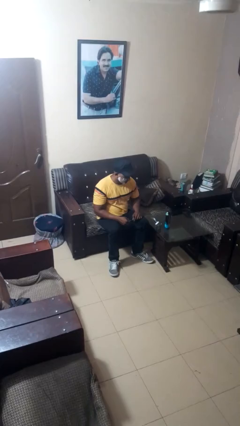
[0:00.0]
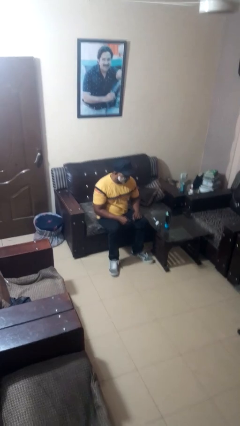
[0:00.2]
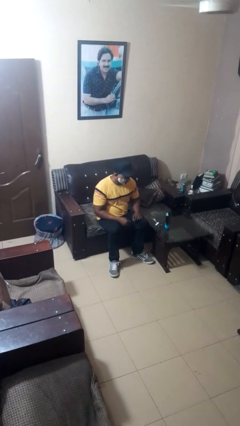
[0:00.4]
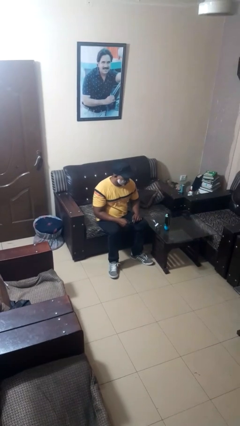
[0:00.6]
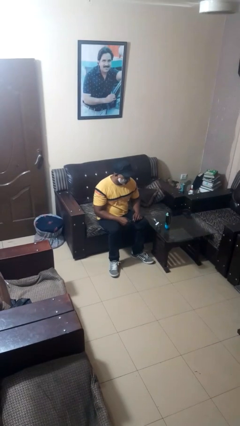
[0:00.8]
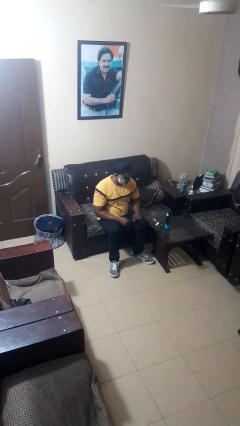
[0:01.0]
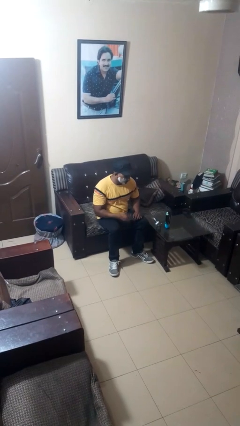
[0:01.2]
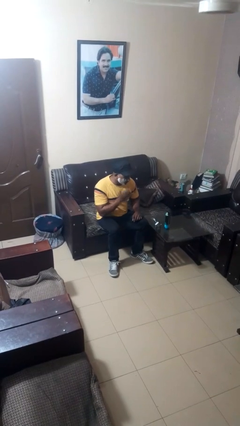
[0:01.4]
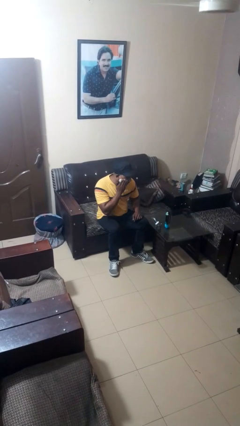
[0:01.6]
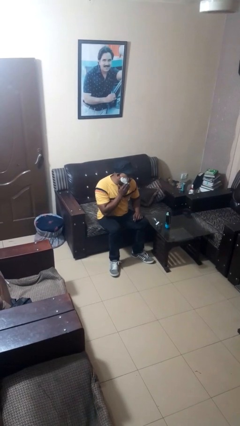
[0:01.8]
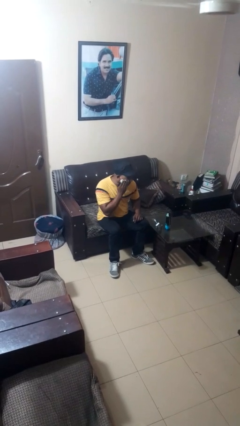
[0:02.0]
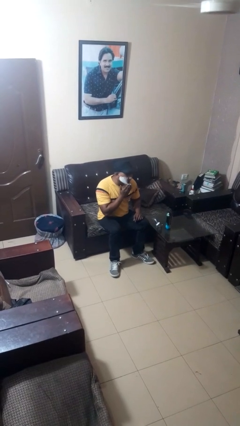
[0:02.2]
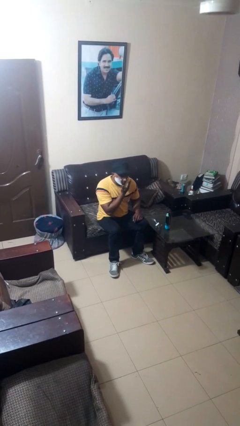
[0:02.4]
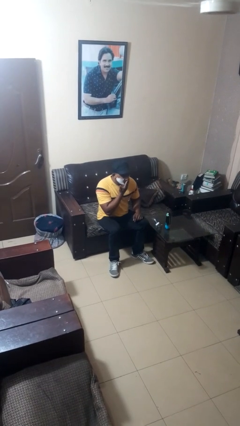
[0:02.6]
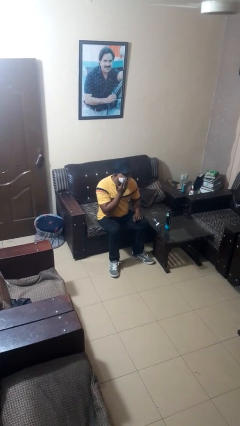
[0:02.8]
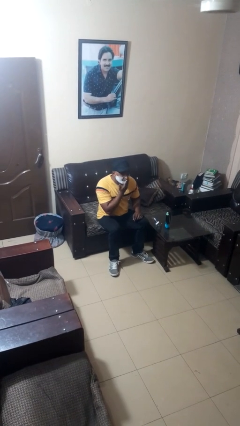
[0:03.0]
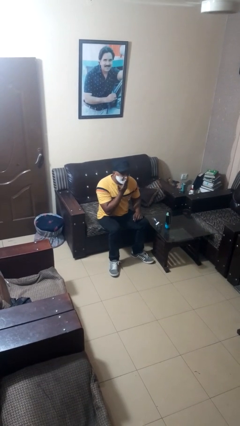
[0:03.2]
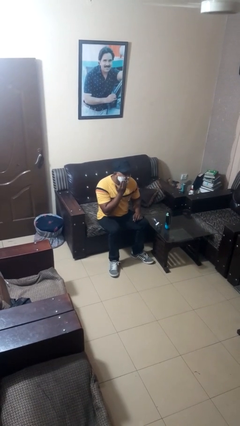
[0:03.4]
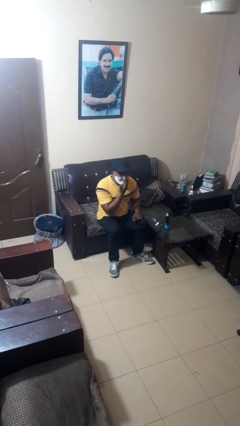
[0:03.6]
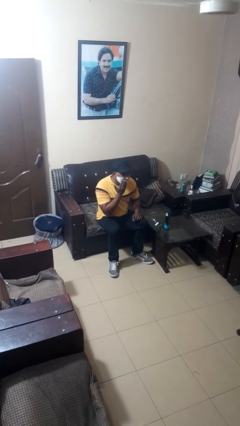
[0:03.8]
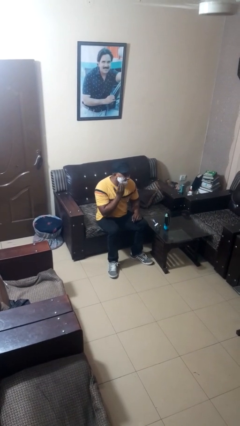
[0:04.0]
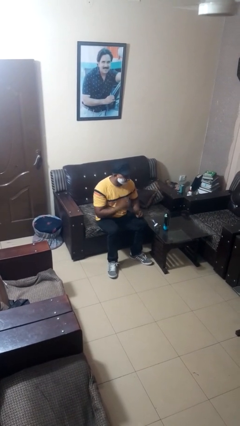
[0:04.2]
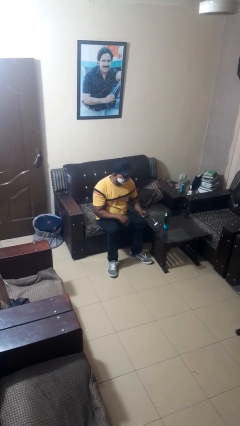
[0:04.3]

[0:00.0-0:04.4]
person applies shaving cream

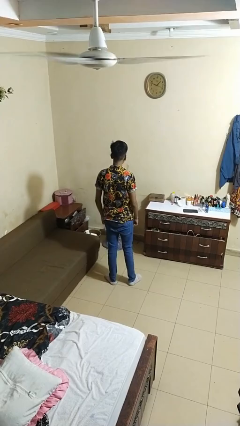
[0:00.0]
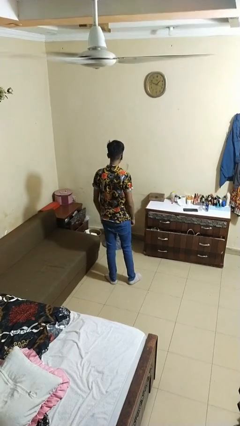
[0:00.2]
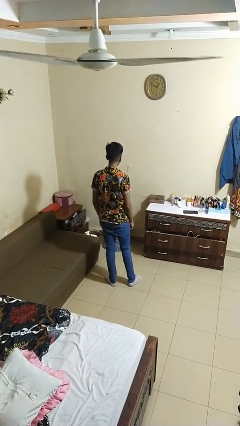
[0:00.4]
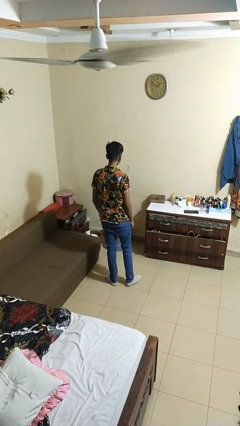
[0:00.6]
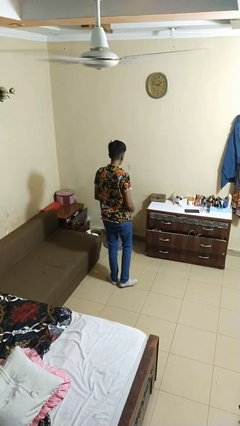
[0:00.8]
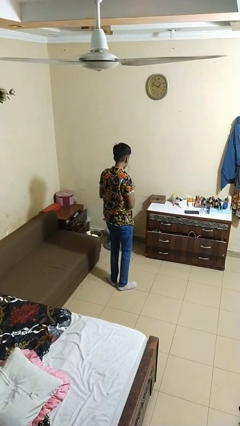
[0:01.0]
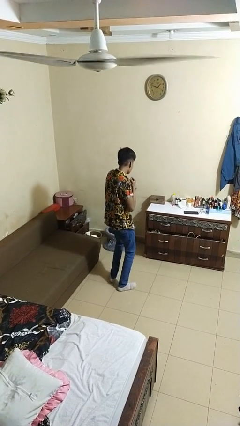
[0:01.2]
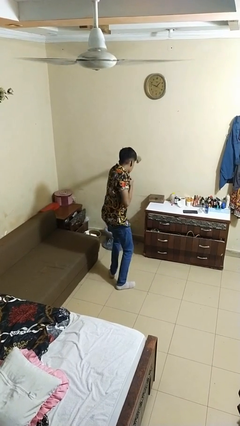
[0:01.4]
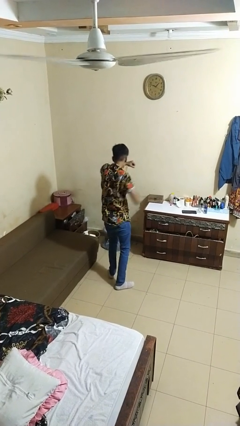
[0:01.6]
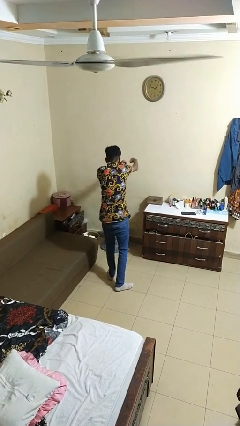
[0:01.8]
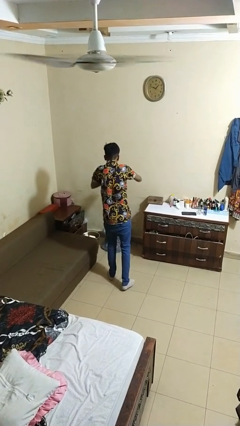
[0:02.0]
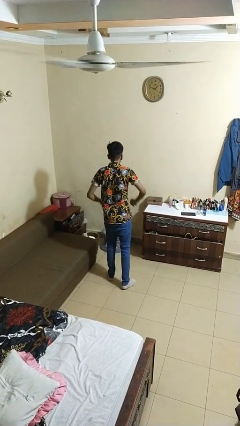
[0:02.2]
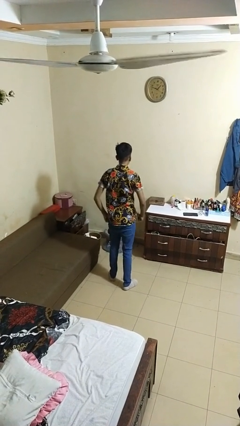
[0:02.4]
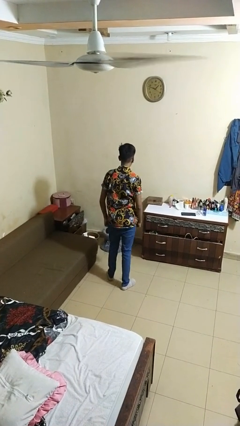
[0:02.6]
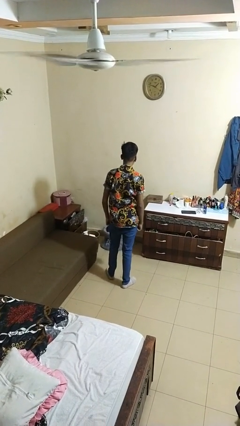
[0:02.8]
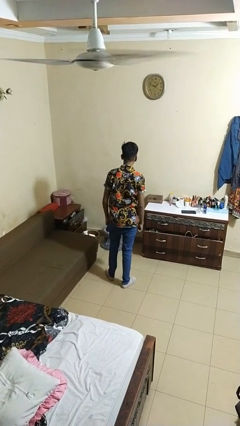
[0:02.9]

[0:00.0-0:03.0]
person punches

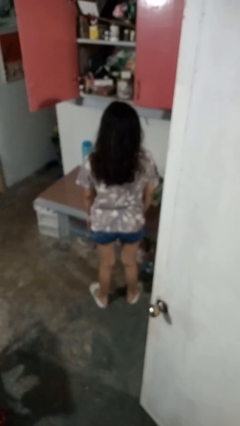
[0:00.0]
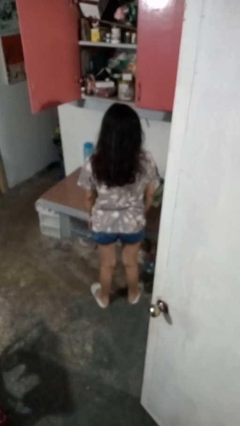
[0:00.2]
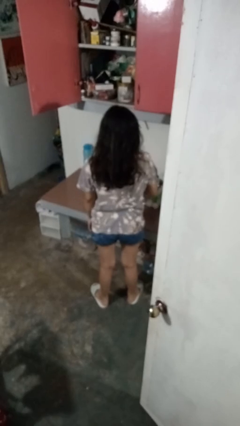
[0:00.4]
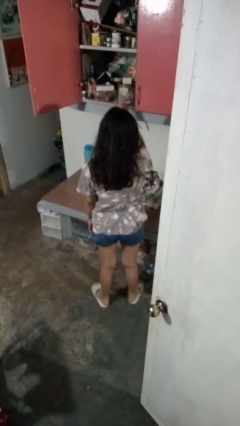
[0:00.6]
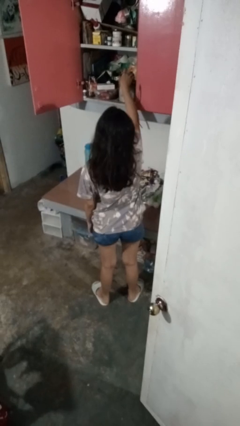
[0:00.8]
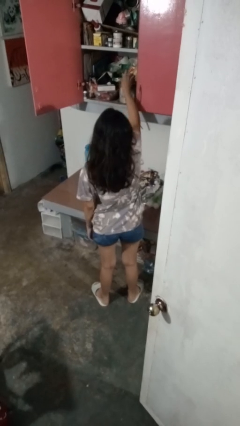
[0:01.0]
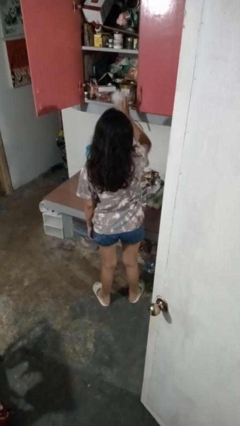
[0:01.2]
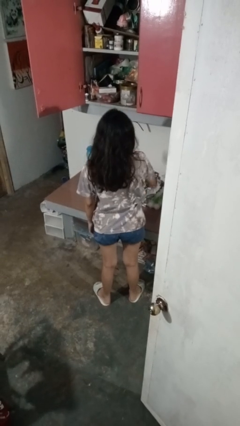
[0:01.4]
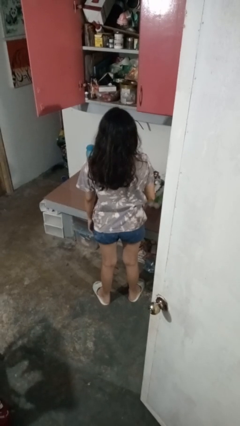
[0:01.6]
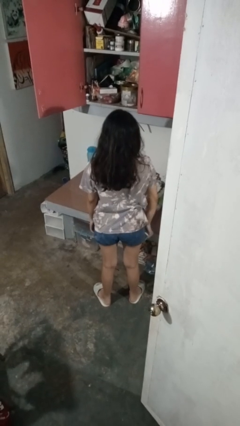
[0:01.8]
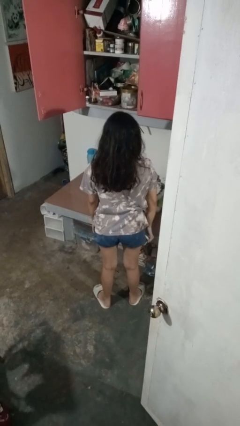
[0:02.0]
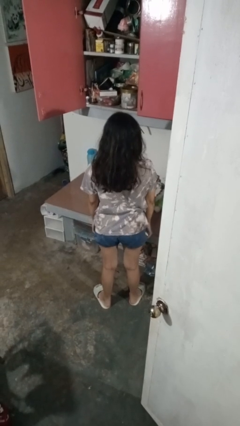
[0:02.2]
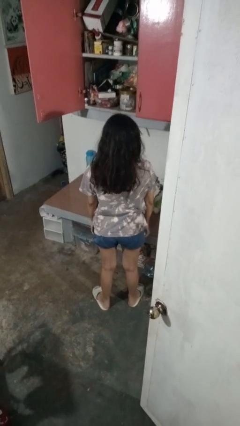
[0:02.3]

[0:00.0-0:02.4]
person takes object from cabinet

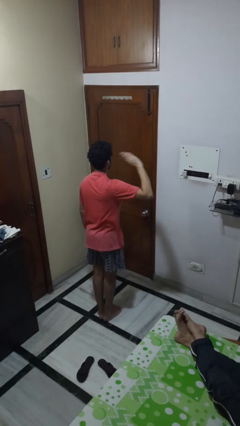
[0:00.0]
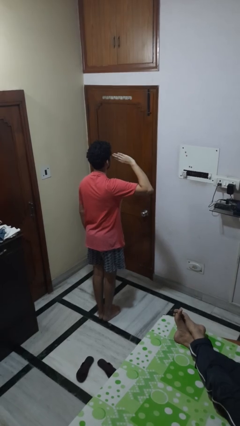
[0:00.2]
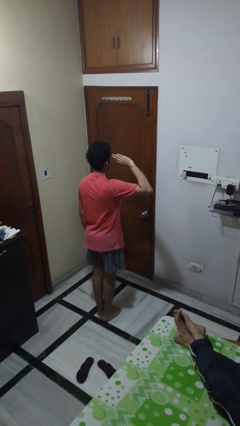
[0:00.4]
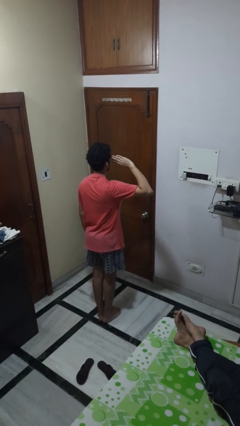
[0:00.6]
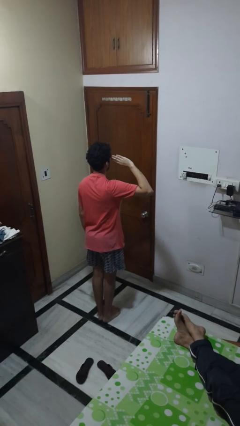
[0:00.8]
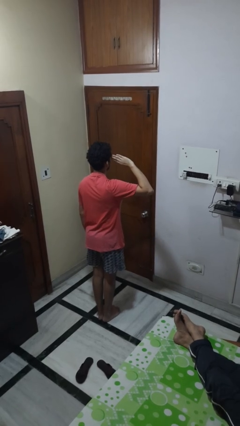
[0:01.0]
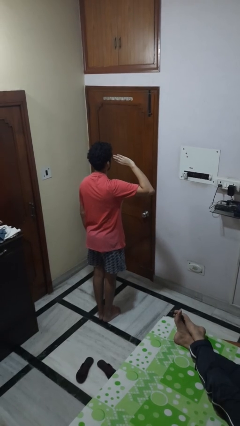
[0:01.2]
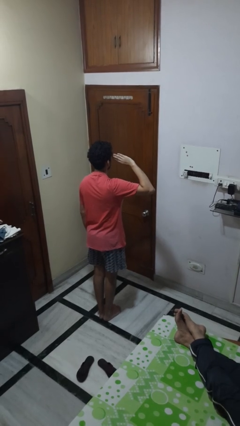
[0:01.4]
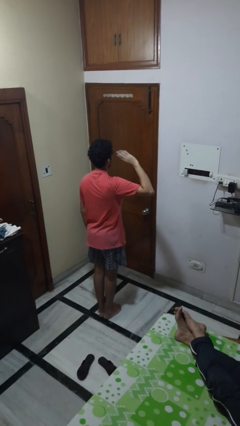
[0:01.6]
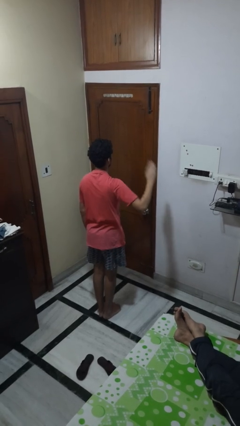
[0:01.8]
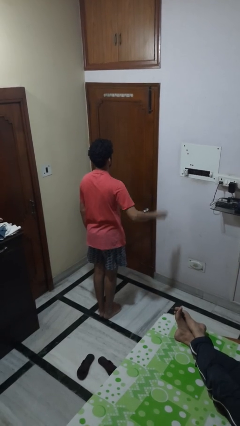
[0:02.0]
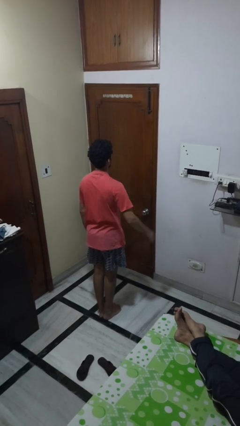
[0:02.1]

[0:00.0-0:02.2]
person salutes

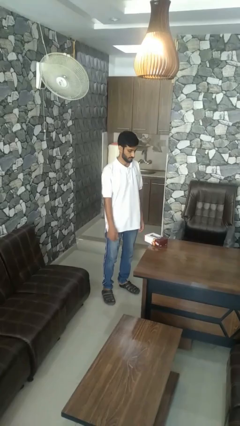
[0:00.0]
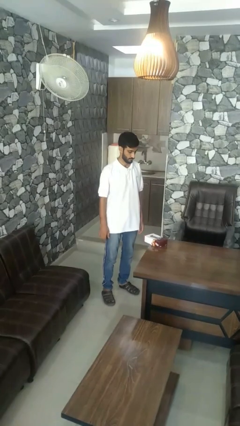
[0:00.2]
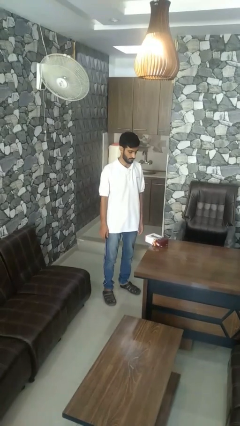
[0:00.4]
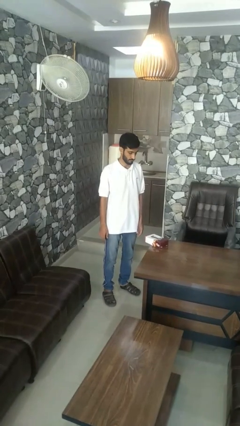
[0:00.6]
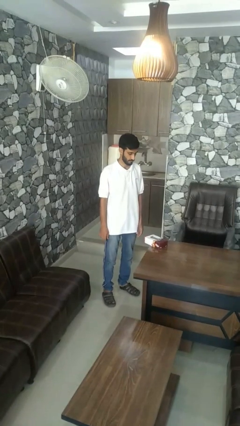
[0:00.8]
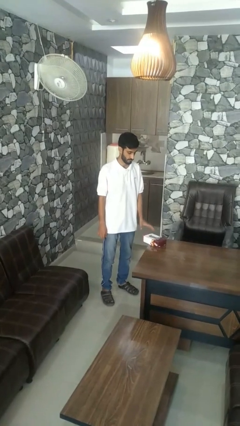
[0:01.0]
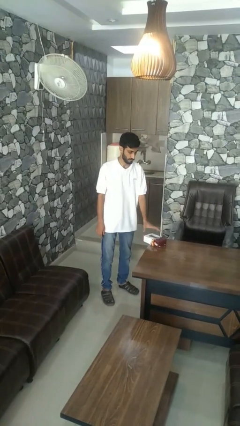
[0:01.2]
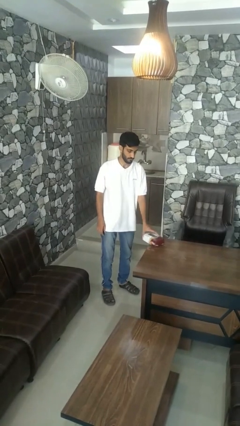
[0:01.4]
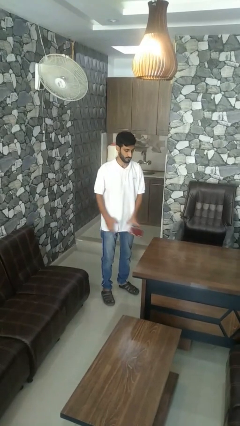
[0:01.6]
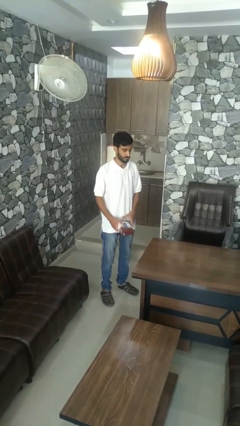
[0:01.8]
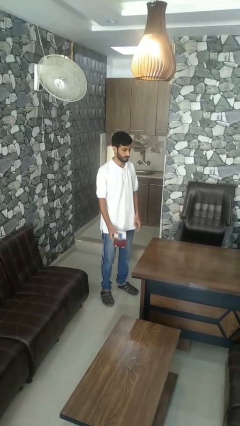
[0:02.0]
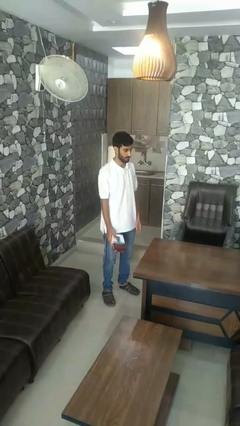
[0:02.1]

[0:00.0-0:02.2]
person picks up object from table

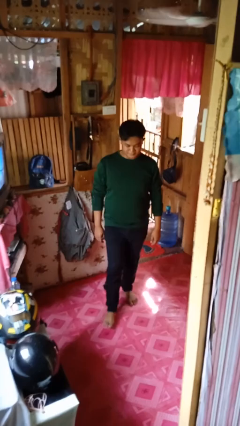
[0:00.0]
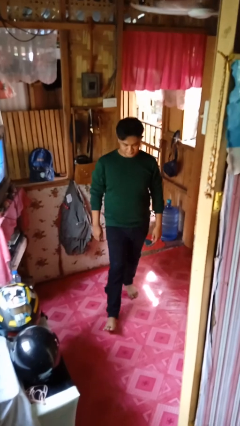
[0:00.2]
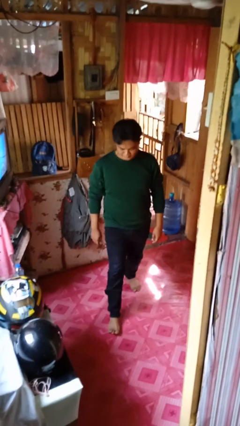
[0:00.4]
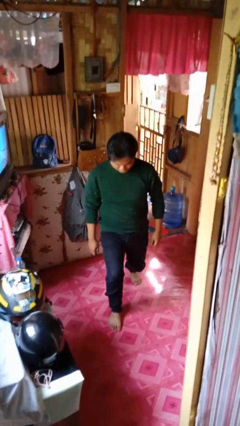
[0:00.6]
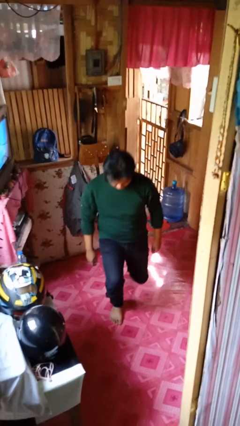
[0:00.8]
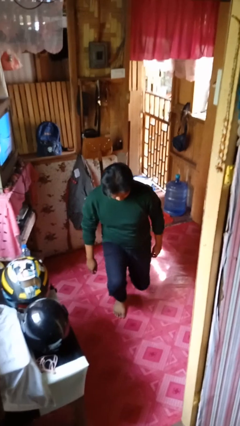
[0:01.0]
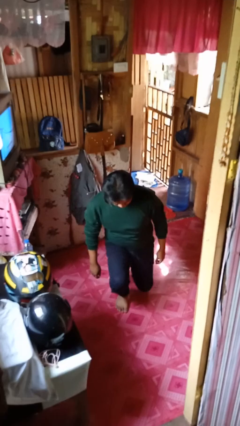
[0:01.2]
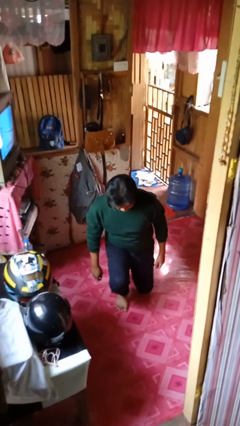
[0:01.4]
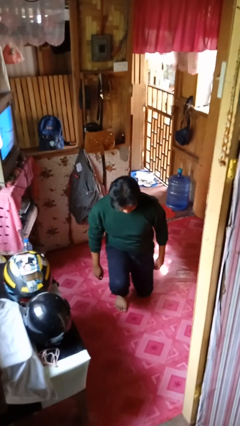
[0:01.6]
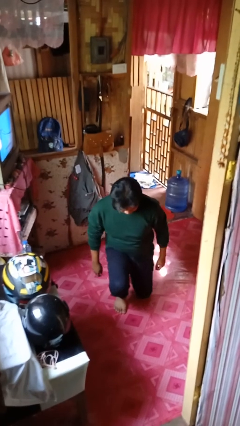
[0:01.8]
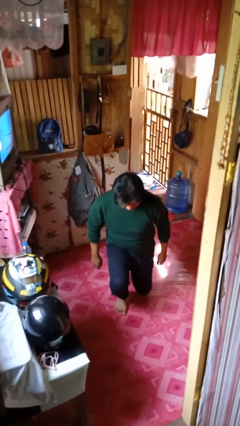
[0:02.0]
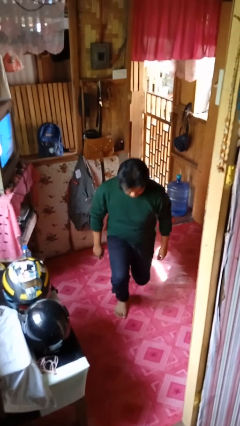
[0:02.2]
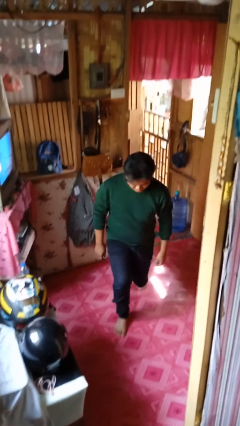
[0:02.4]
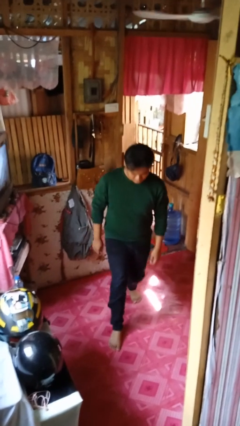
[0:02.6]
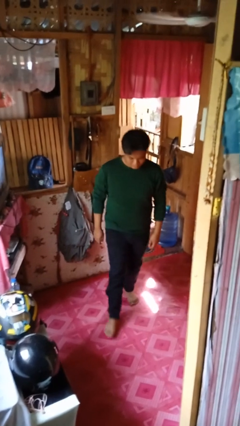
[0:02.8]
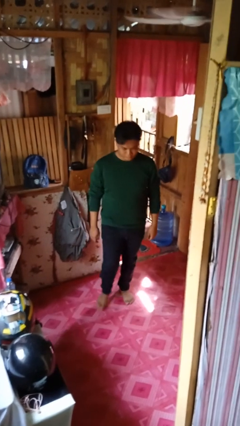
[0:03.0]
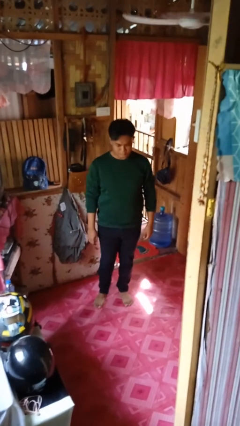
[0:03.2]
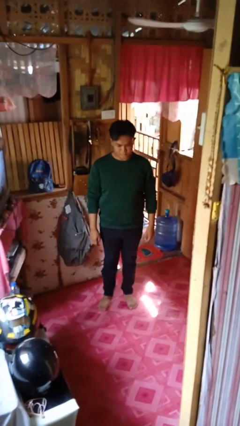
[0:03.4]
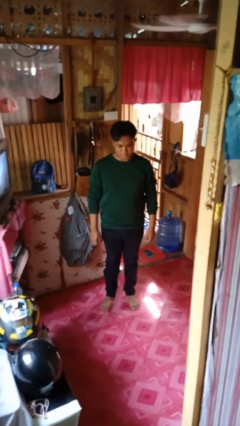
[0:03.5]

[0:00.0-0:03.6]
person exercises with lunges
